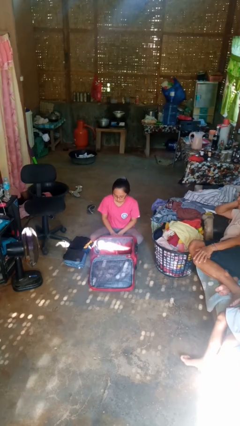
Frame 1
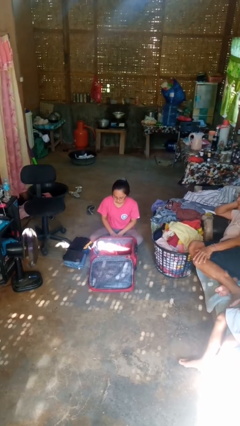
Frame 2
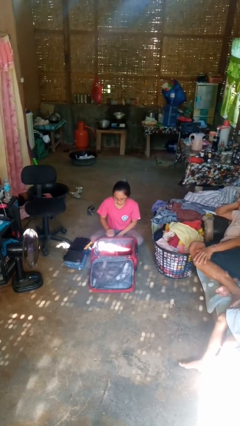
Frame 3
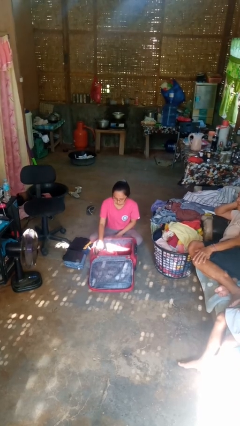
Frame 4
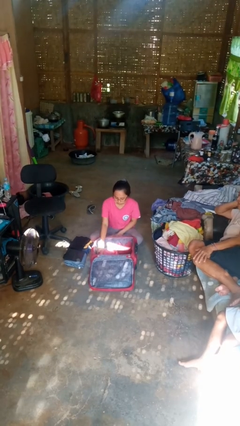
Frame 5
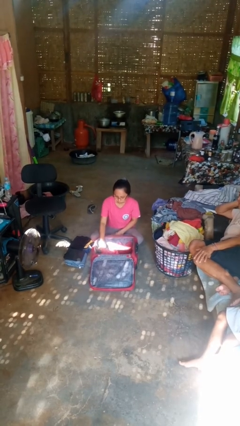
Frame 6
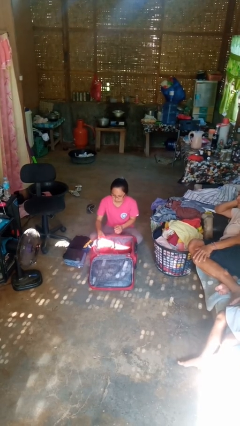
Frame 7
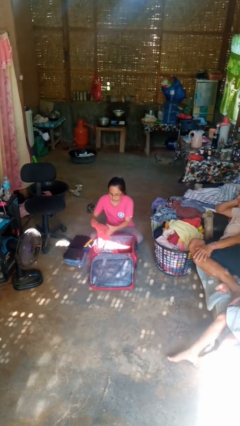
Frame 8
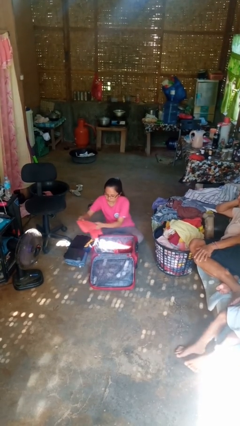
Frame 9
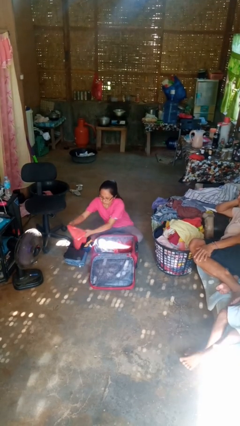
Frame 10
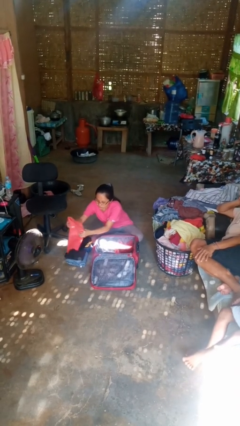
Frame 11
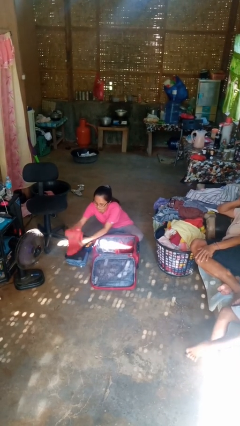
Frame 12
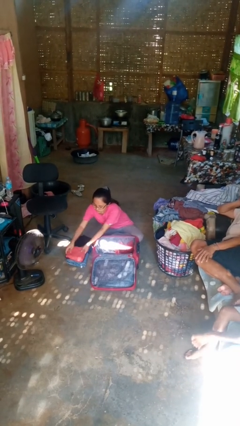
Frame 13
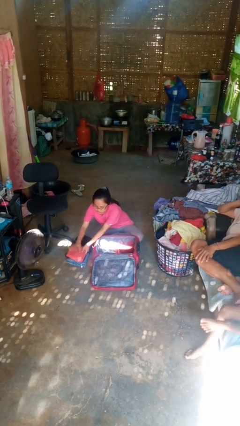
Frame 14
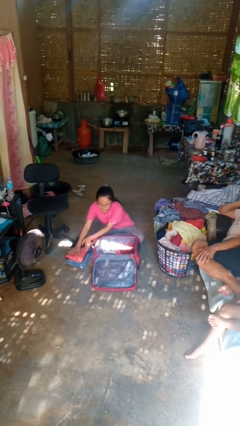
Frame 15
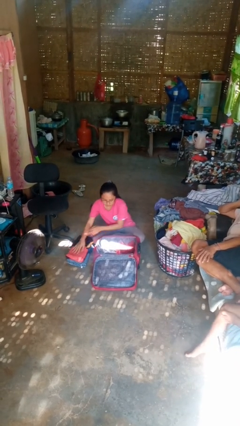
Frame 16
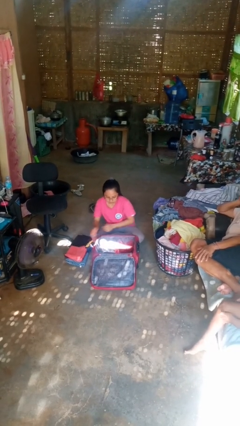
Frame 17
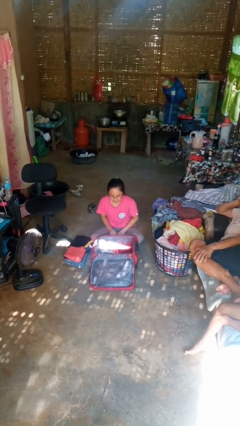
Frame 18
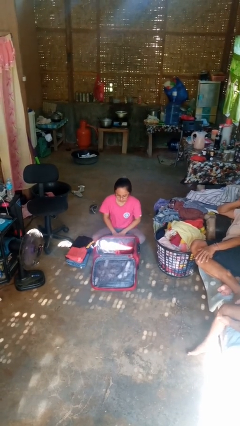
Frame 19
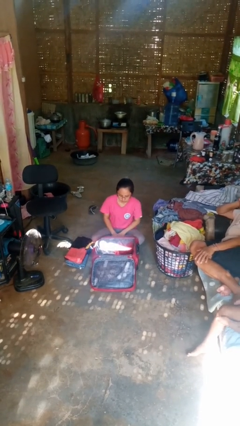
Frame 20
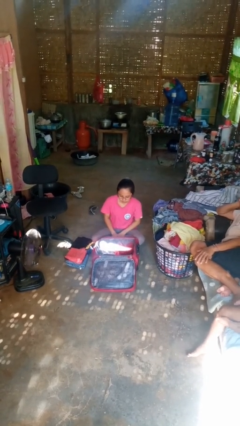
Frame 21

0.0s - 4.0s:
person unloads clothes from suitcase

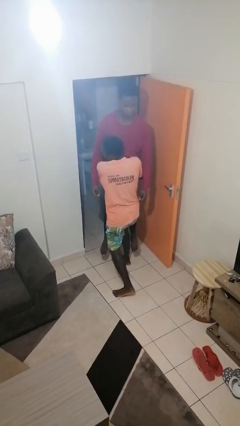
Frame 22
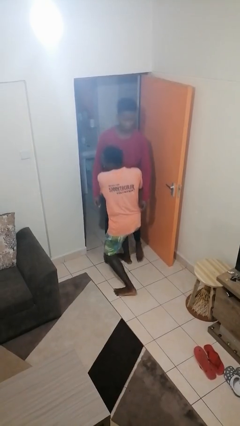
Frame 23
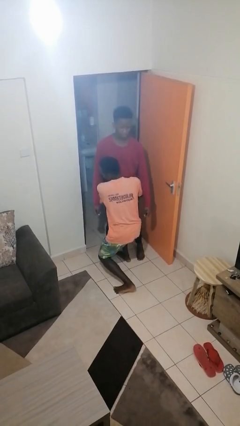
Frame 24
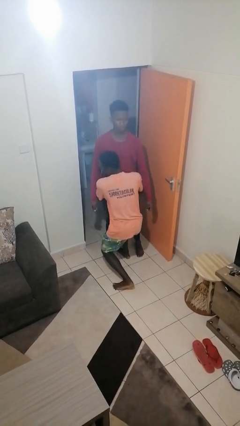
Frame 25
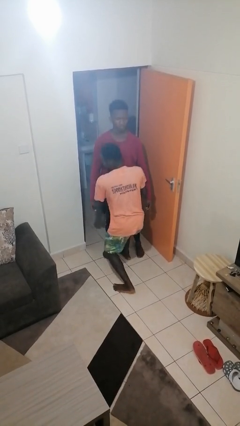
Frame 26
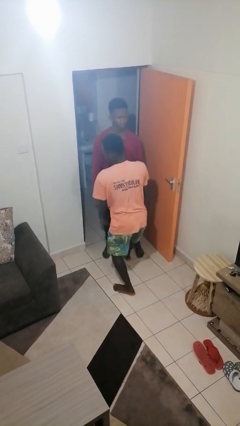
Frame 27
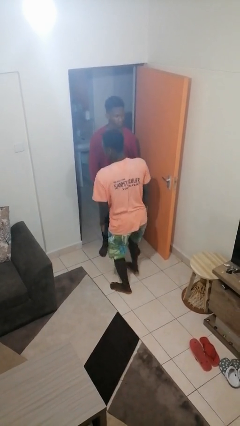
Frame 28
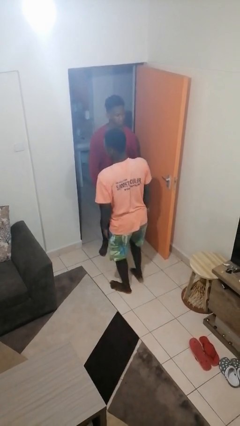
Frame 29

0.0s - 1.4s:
person puts down person

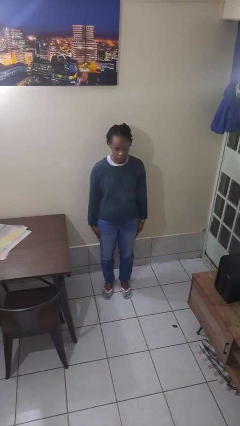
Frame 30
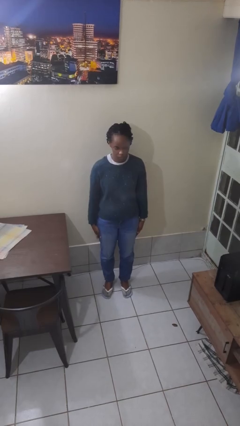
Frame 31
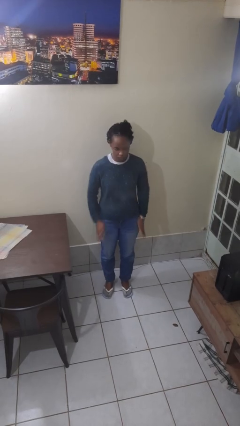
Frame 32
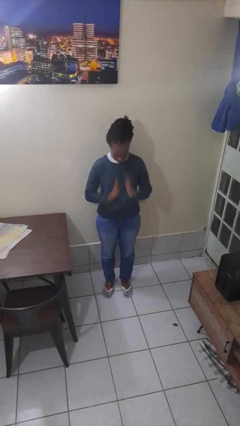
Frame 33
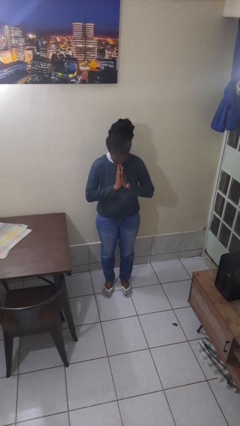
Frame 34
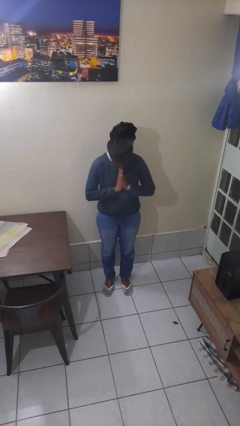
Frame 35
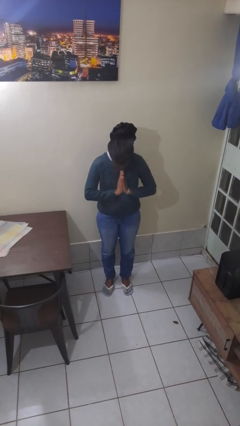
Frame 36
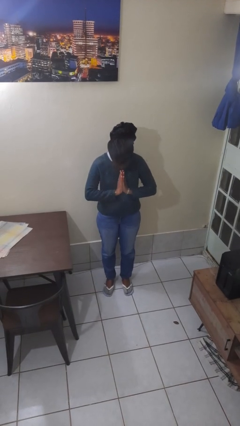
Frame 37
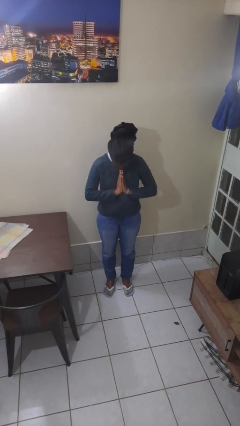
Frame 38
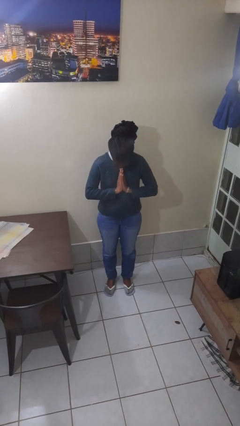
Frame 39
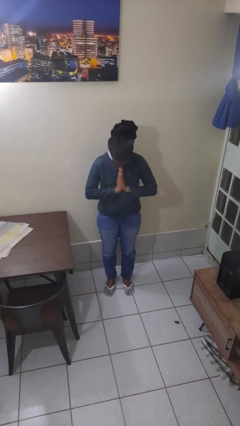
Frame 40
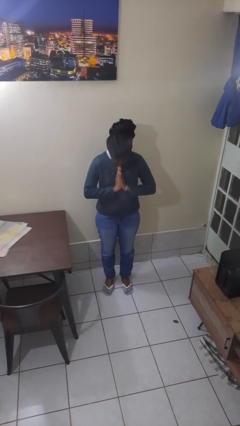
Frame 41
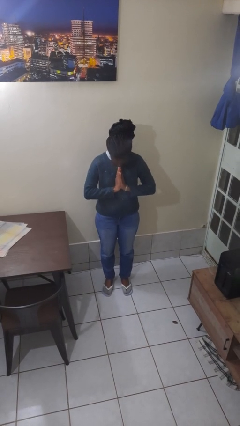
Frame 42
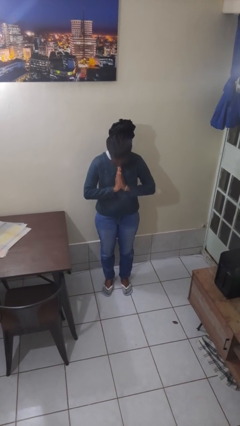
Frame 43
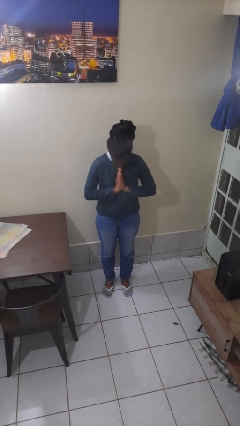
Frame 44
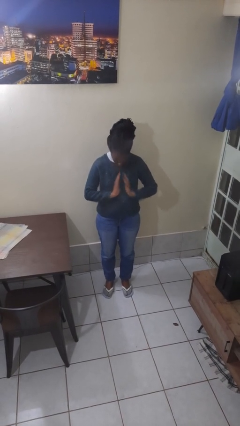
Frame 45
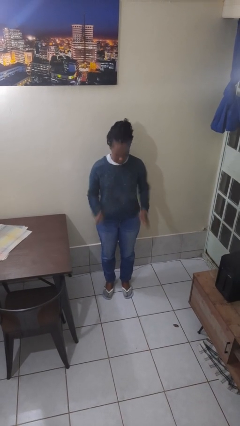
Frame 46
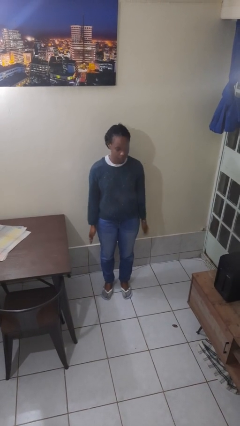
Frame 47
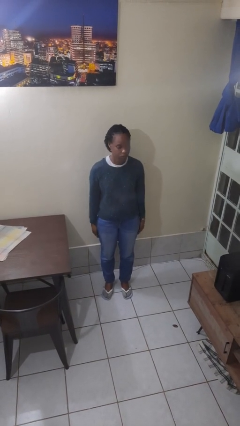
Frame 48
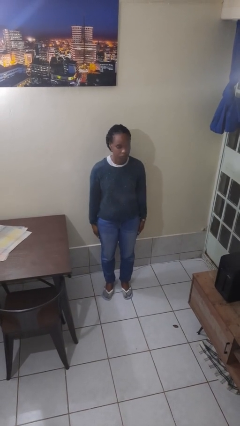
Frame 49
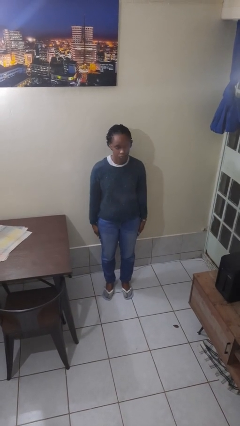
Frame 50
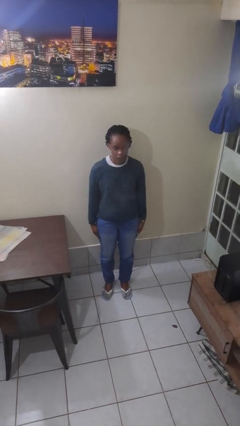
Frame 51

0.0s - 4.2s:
person prays

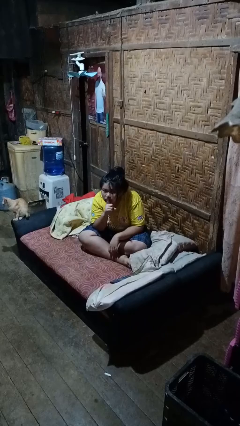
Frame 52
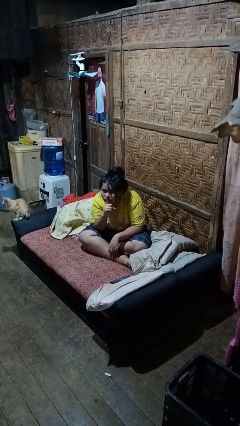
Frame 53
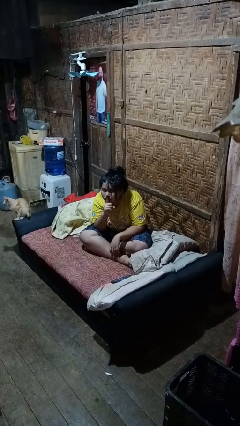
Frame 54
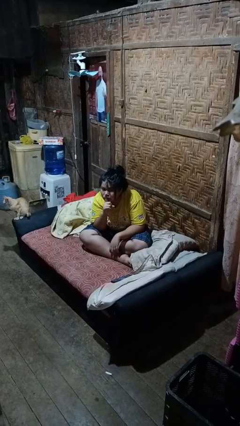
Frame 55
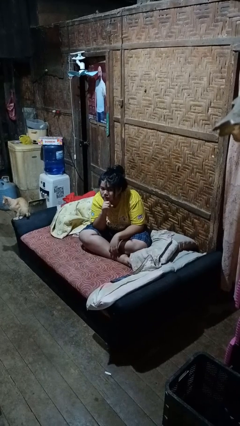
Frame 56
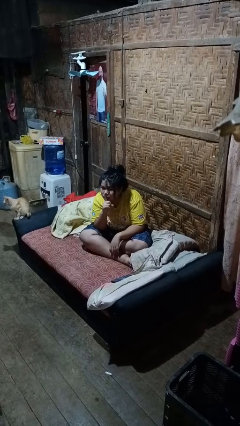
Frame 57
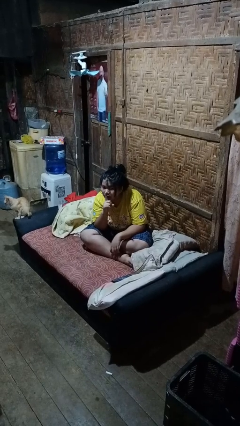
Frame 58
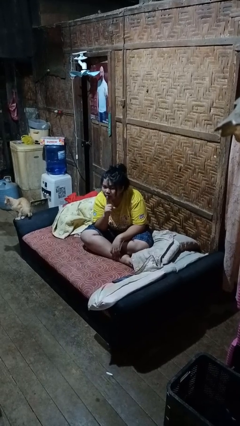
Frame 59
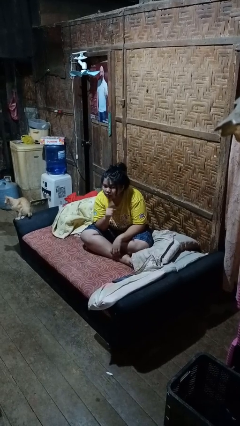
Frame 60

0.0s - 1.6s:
person gestures be quiet

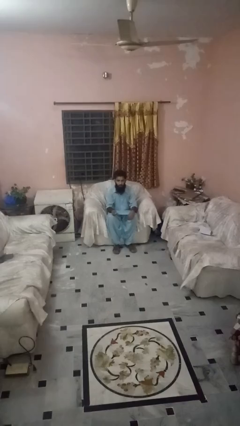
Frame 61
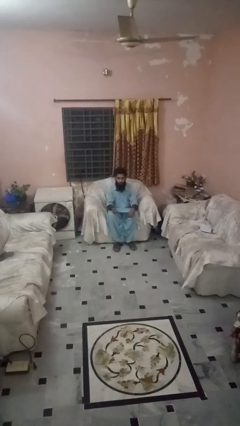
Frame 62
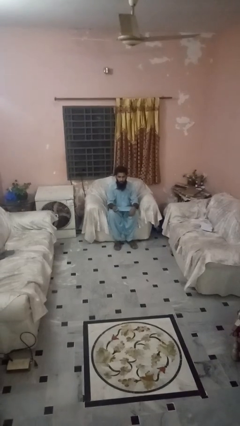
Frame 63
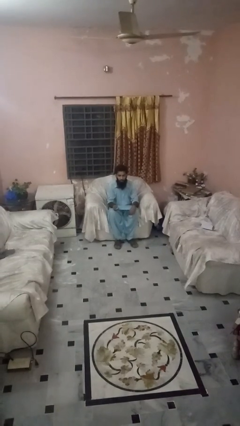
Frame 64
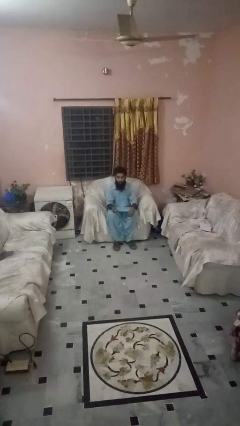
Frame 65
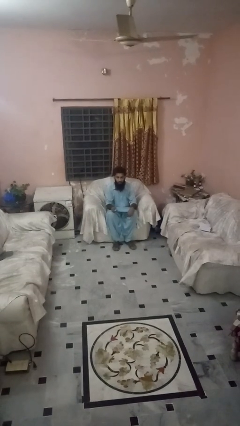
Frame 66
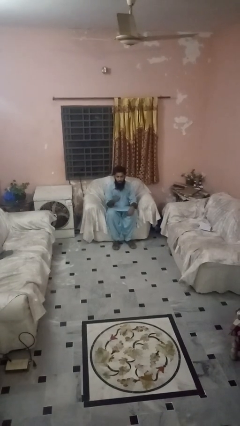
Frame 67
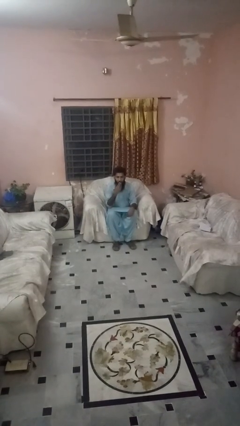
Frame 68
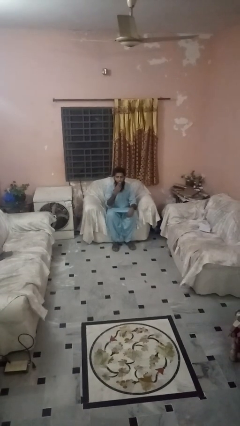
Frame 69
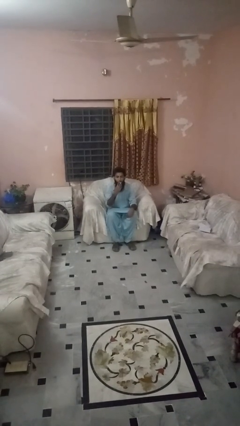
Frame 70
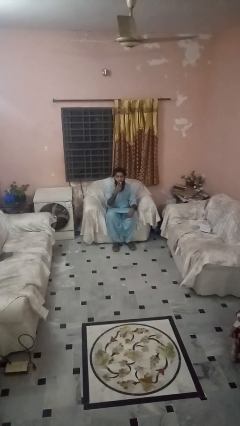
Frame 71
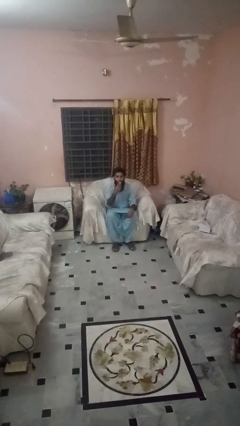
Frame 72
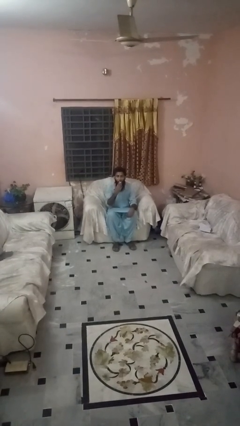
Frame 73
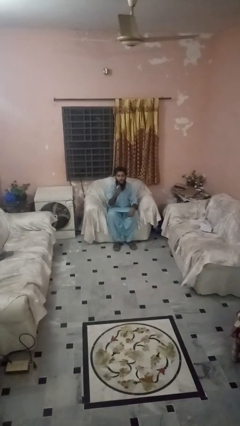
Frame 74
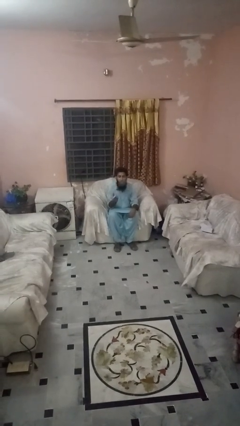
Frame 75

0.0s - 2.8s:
person vapes

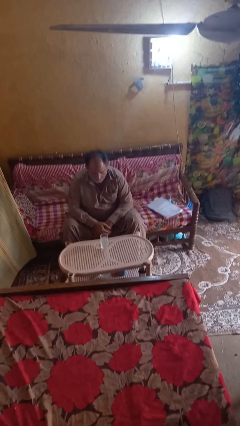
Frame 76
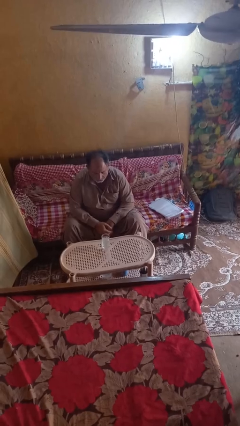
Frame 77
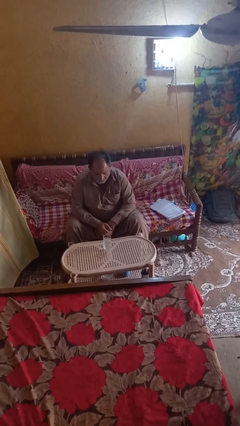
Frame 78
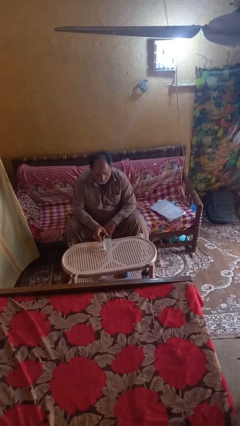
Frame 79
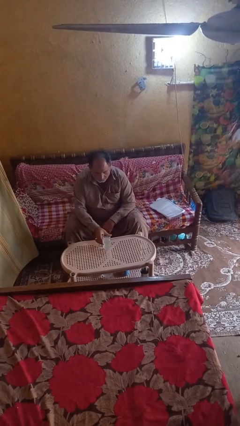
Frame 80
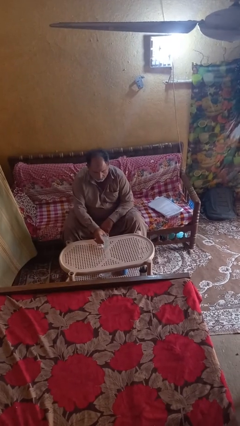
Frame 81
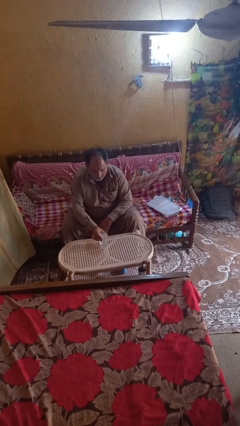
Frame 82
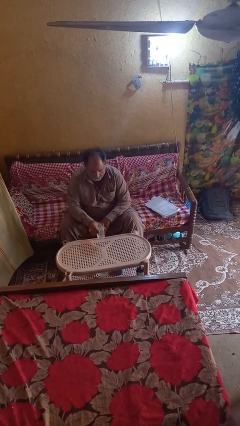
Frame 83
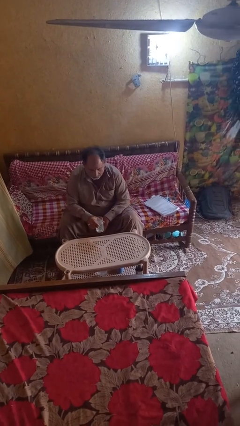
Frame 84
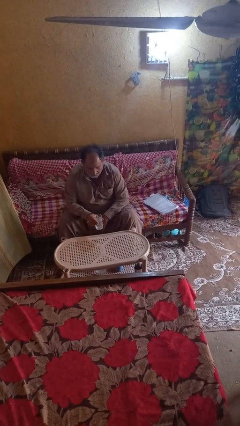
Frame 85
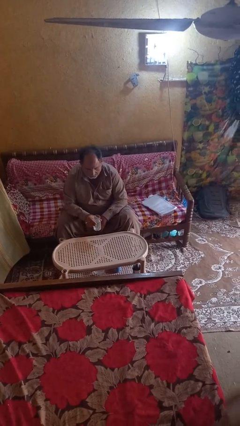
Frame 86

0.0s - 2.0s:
person picks up object from table

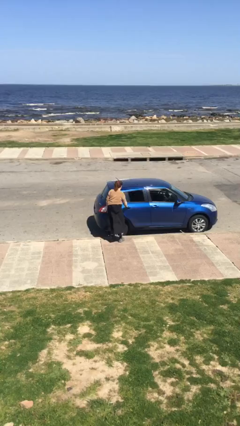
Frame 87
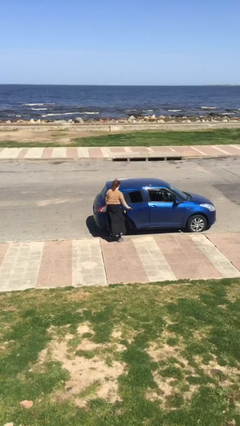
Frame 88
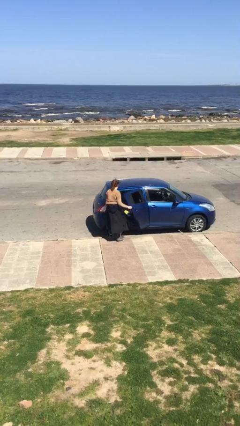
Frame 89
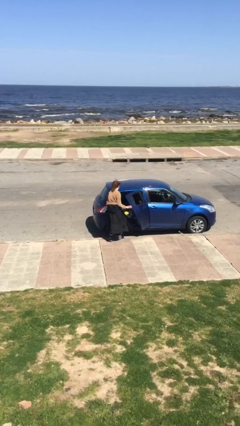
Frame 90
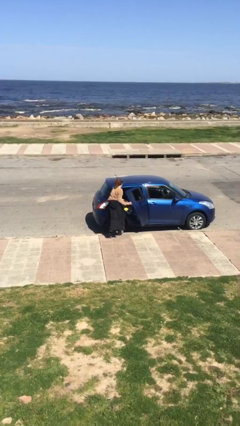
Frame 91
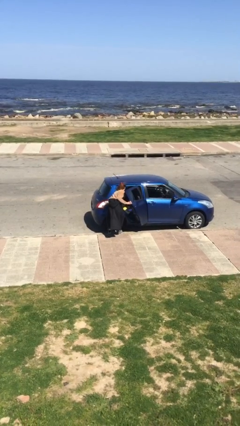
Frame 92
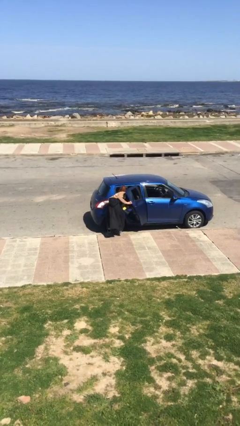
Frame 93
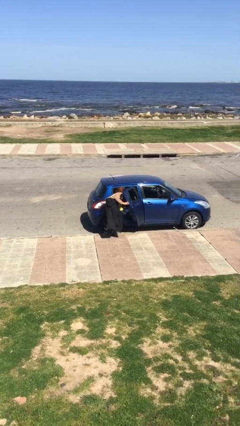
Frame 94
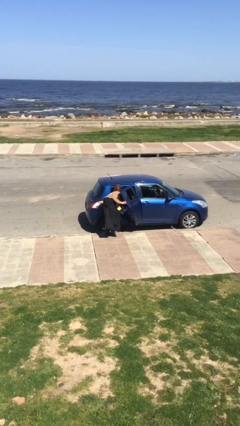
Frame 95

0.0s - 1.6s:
person opens car door
